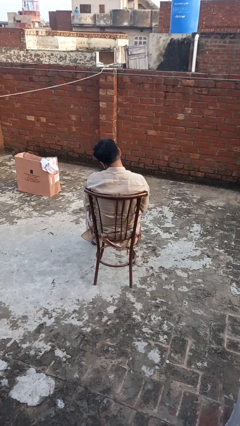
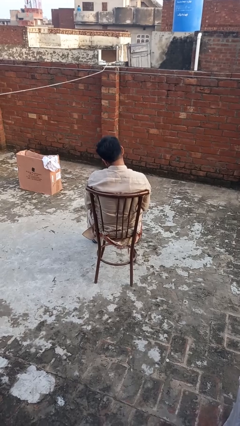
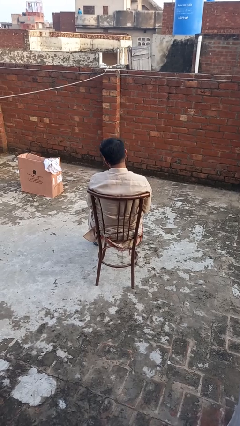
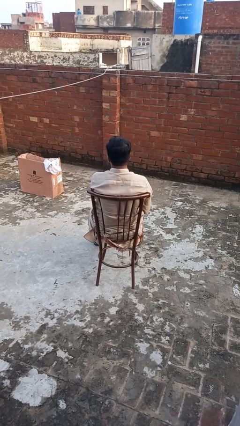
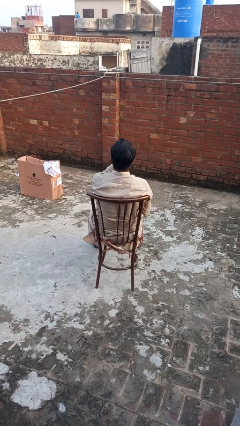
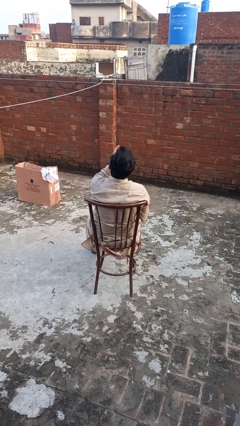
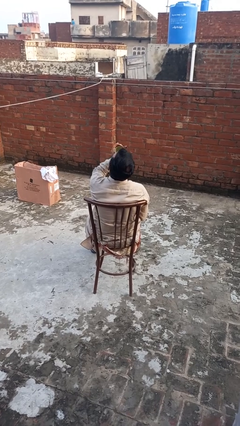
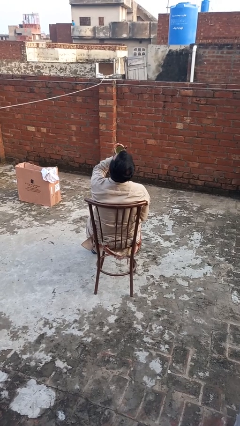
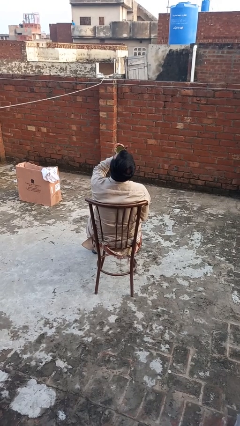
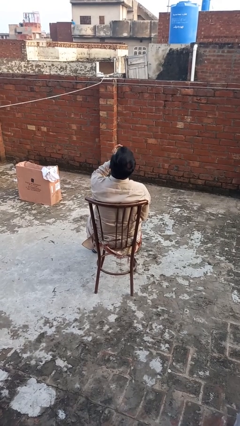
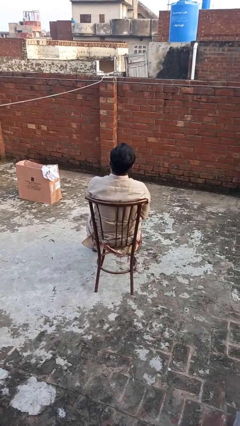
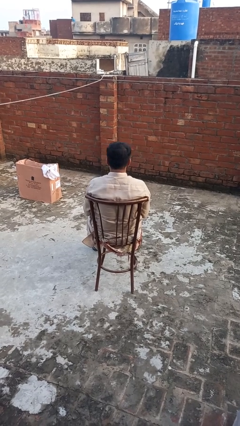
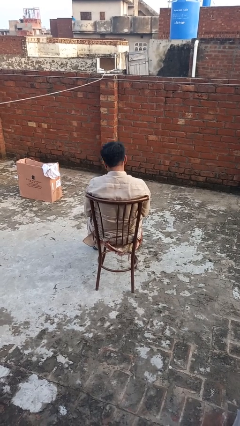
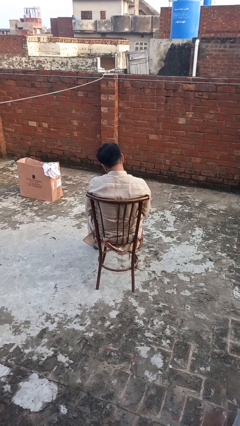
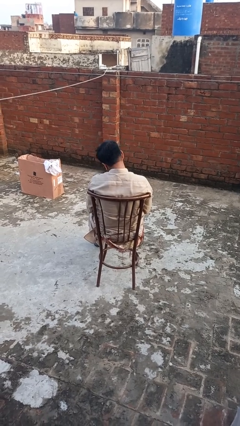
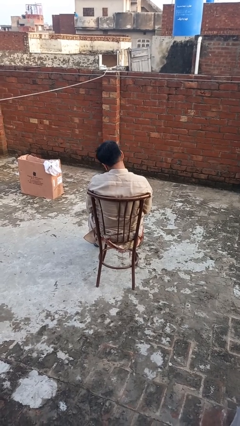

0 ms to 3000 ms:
person drinks from mug

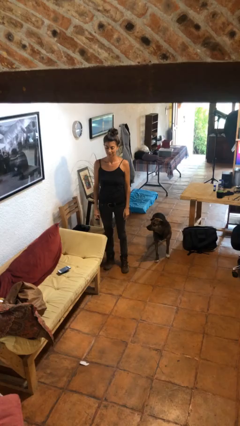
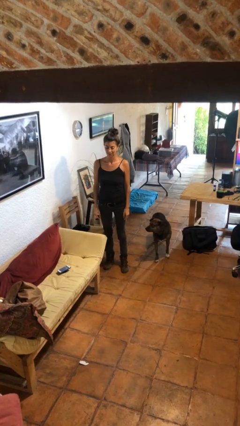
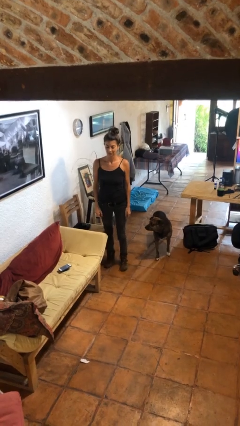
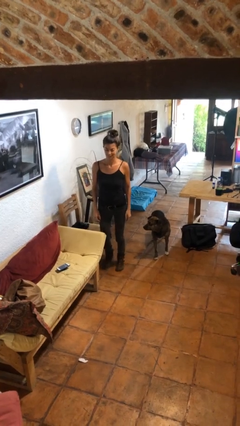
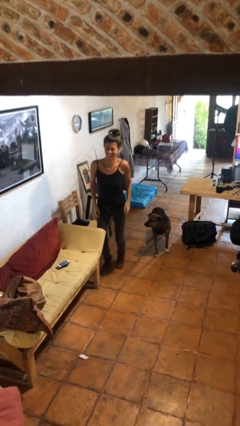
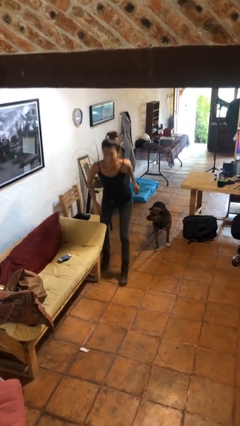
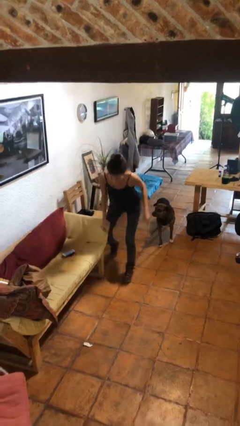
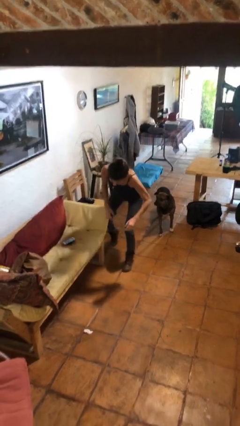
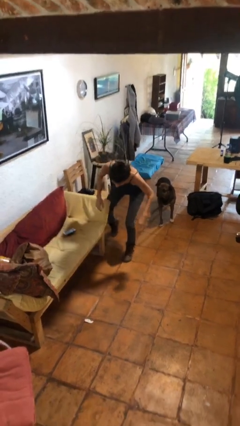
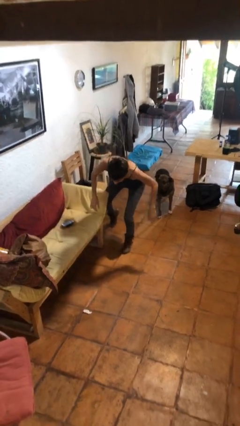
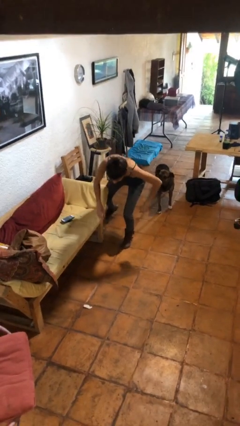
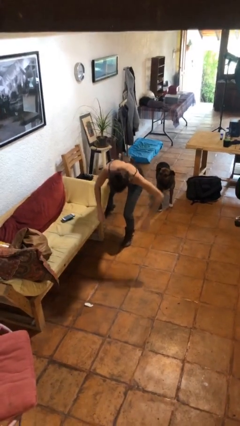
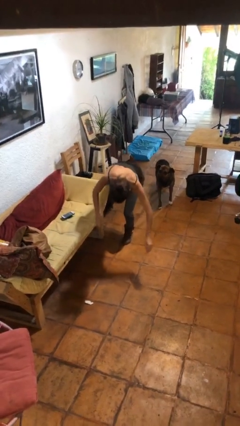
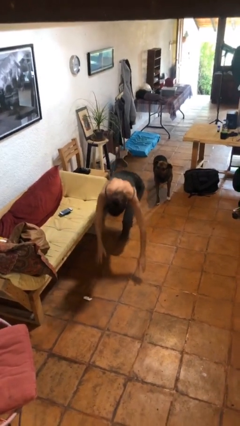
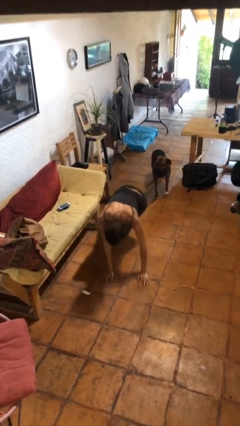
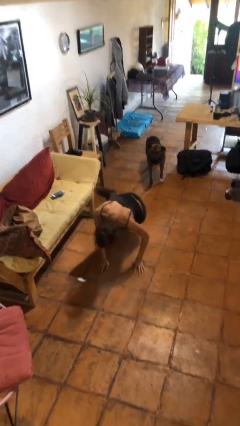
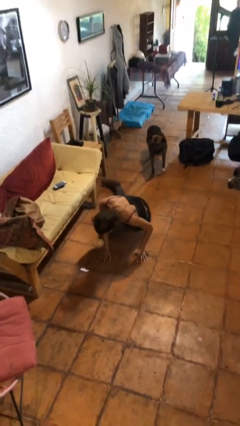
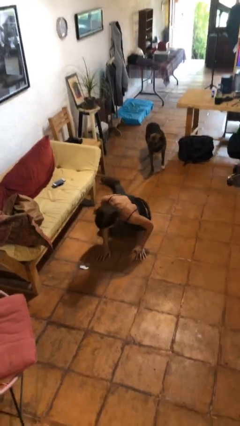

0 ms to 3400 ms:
person trips on object on floor

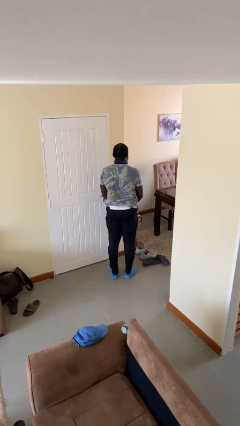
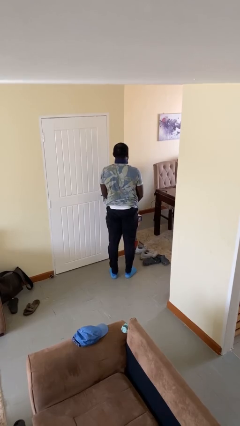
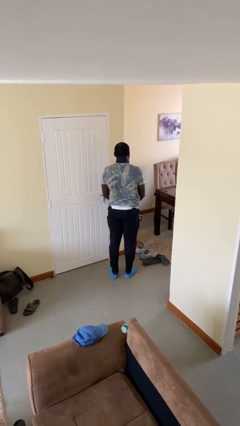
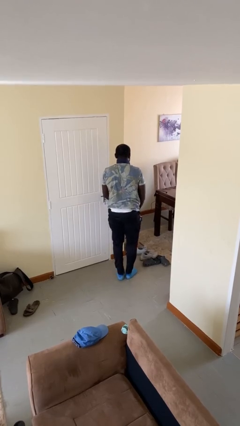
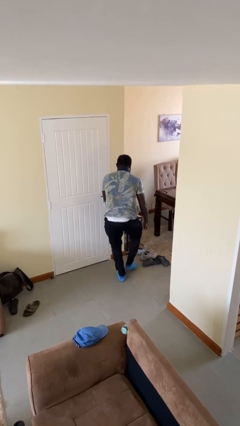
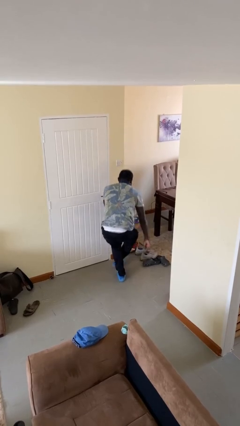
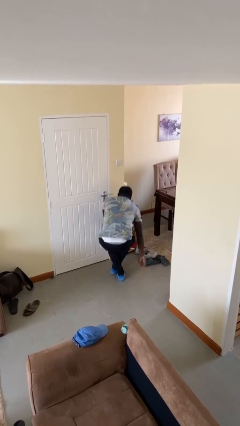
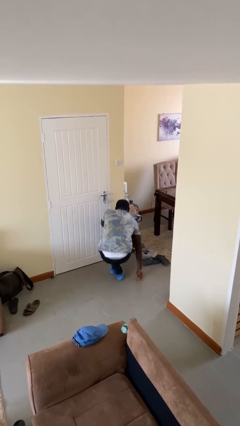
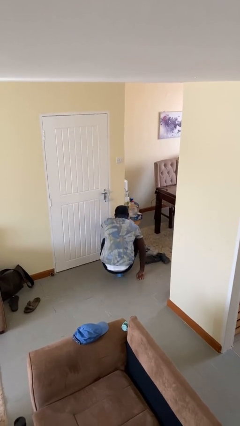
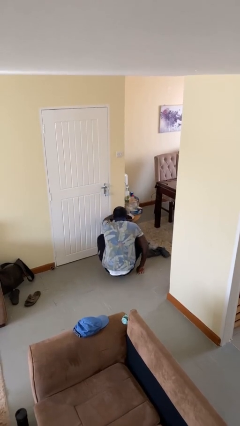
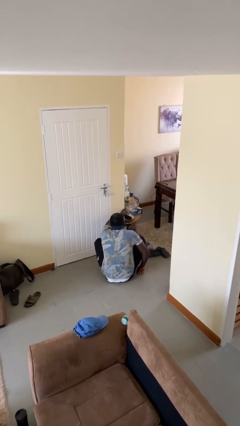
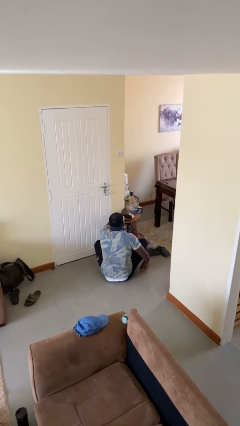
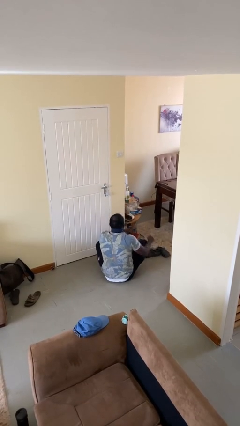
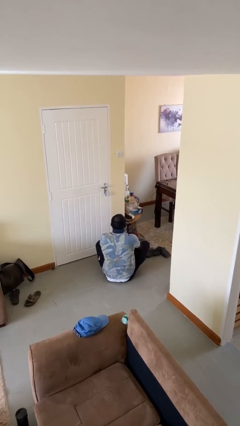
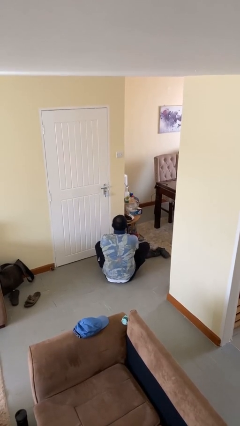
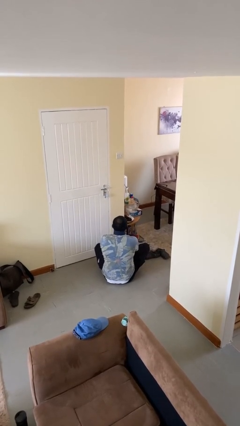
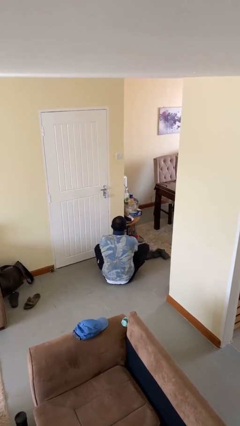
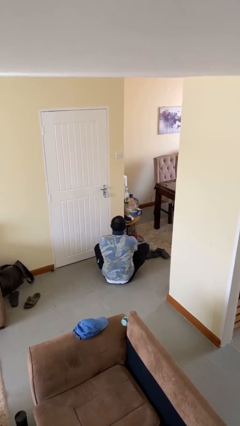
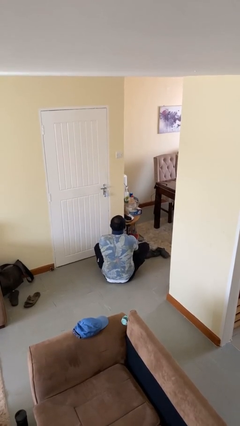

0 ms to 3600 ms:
person sits crisscross

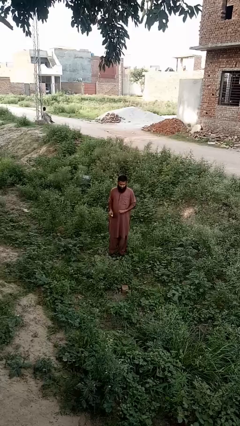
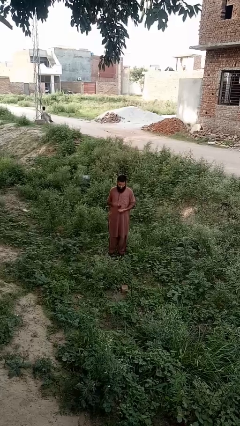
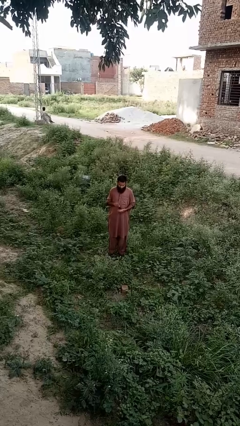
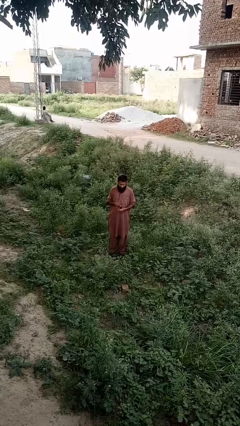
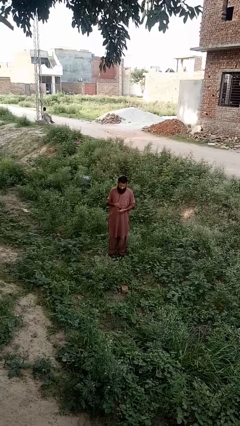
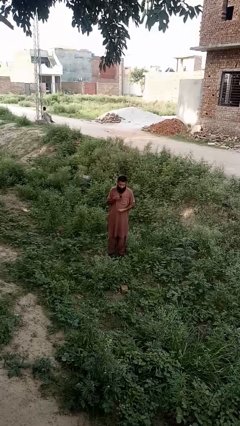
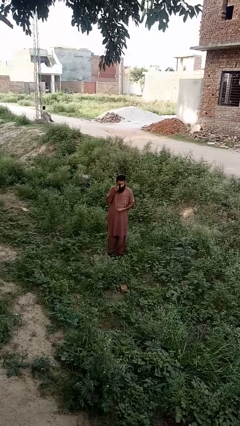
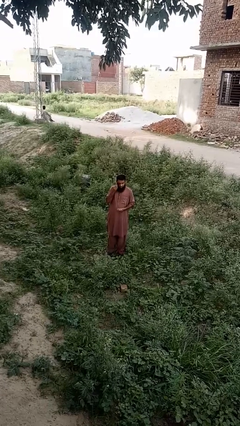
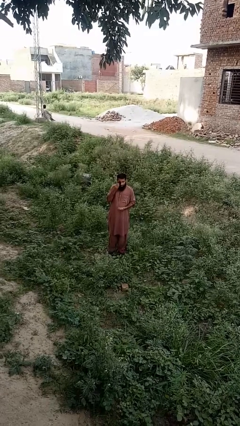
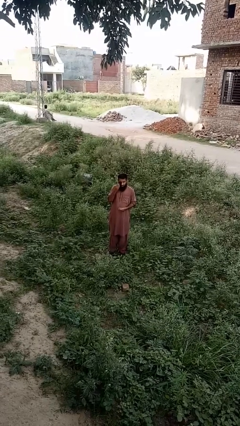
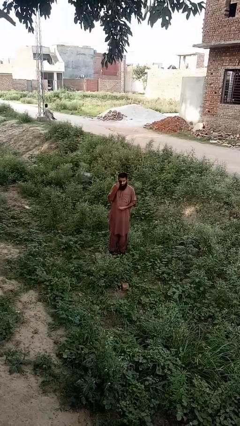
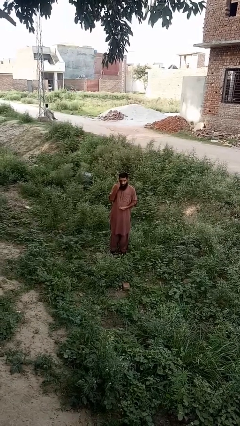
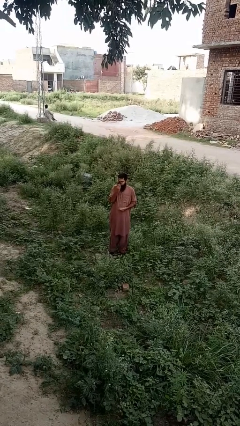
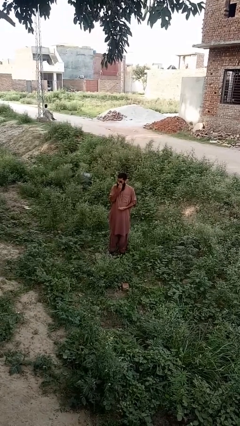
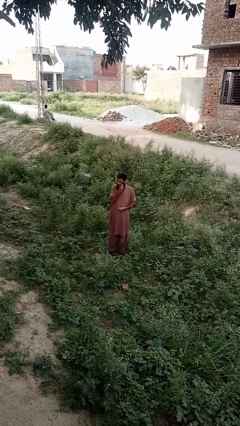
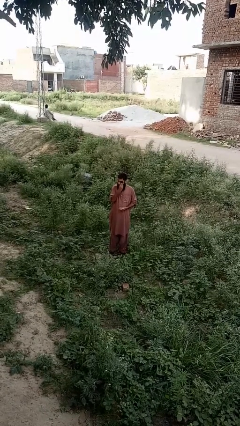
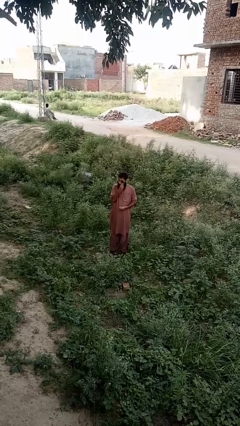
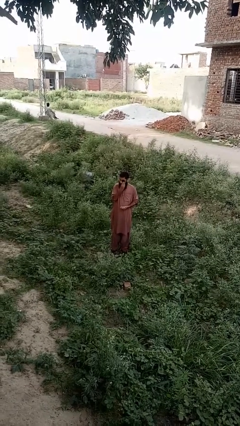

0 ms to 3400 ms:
person shades eyes

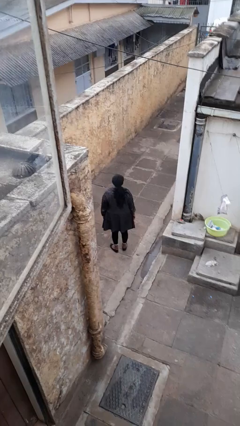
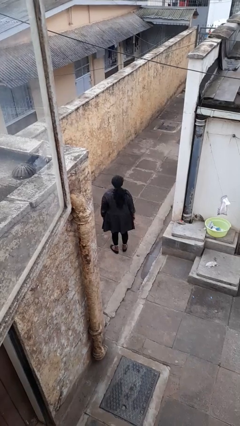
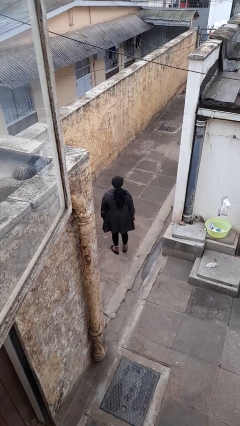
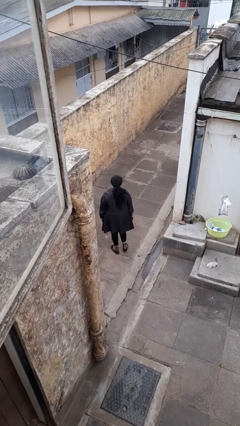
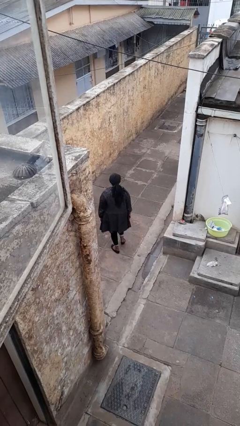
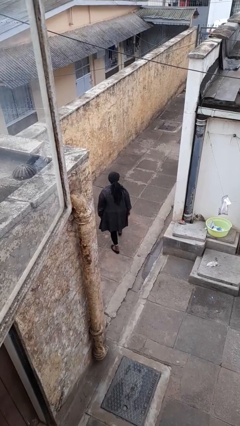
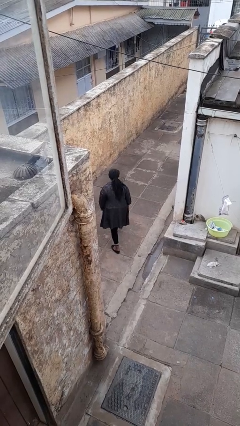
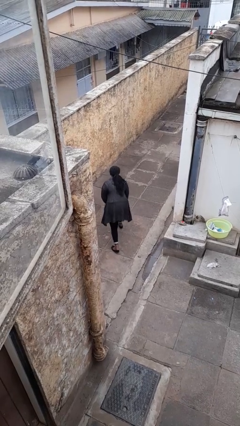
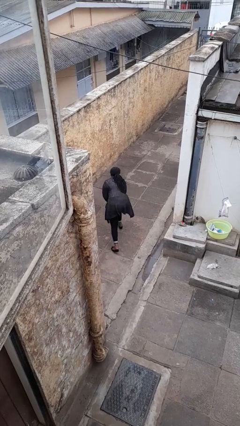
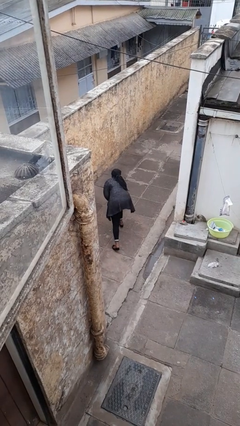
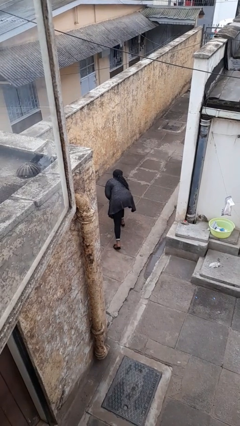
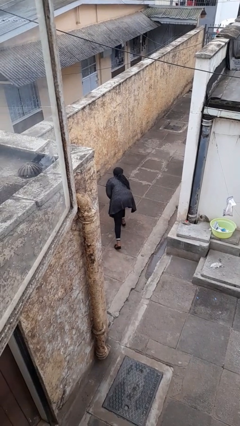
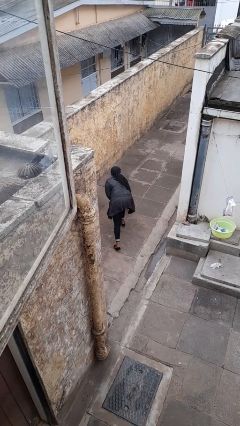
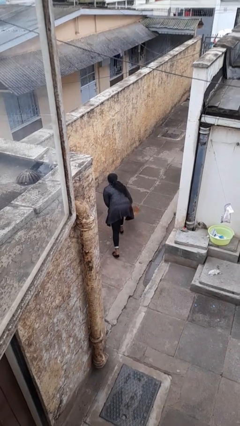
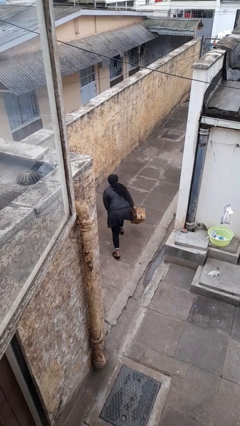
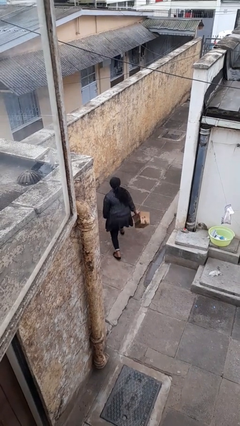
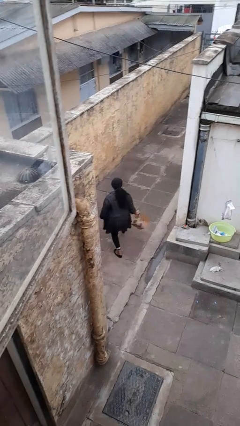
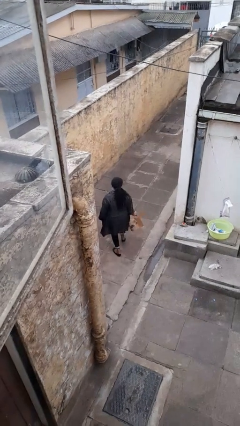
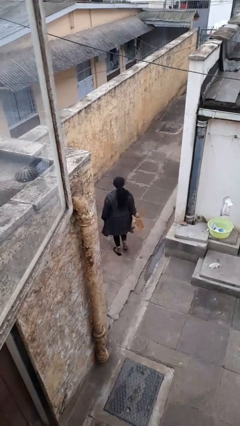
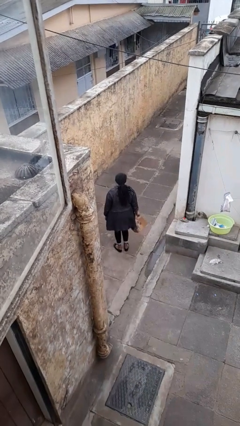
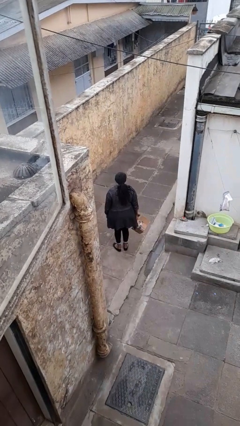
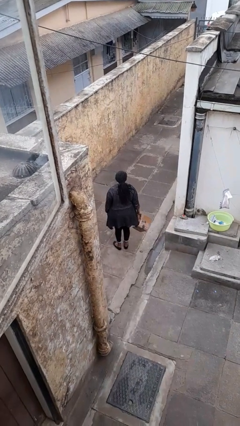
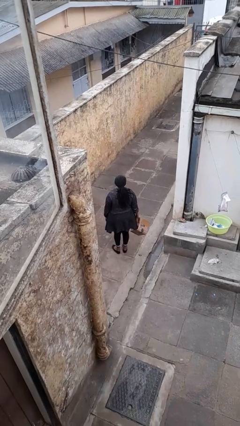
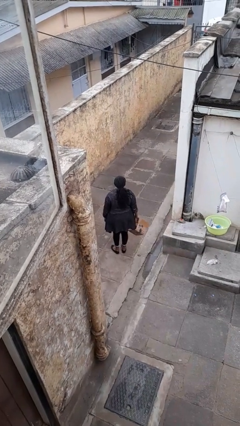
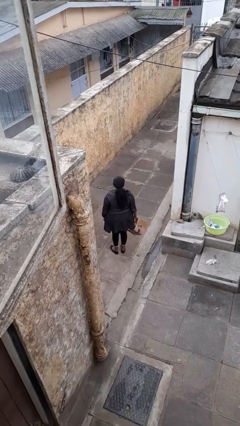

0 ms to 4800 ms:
person picks up object from floor
